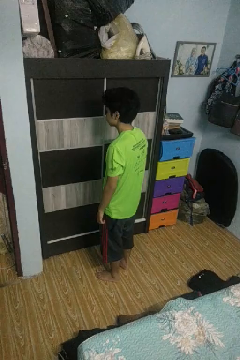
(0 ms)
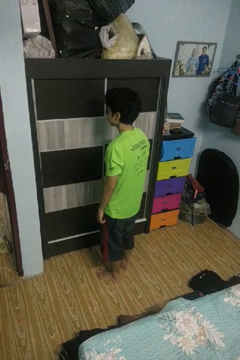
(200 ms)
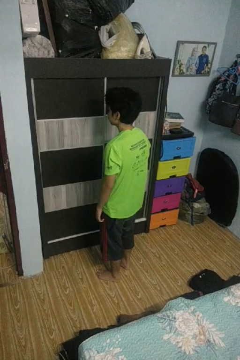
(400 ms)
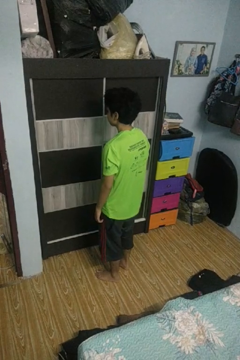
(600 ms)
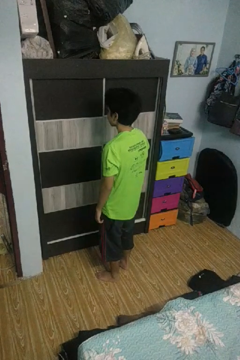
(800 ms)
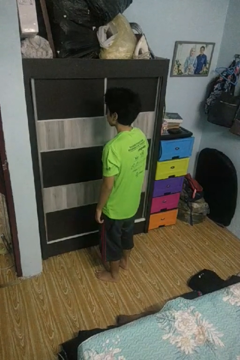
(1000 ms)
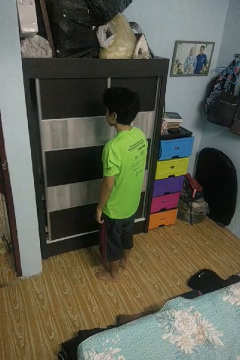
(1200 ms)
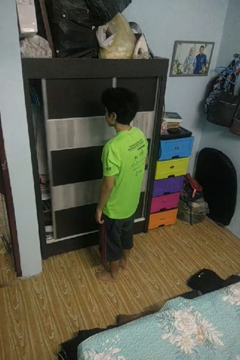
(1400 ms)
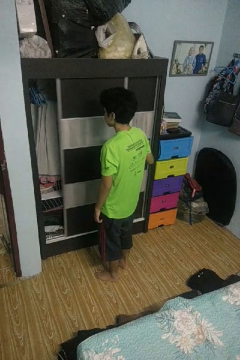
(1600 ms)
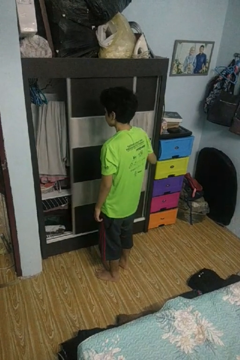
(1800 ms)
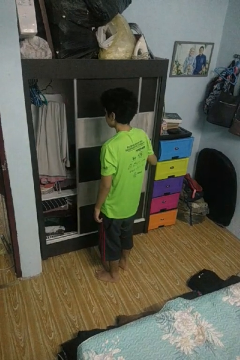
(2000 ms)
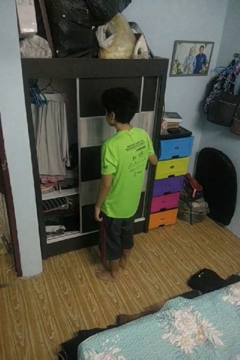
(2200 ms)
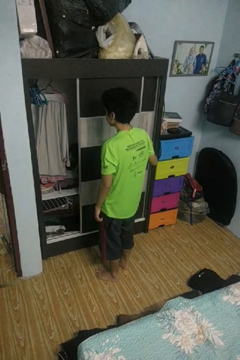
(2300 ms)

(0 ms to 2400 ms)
person opens closet door

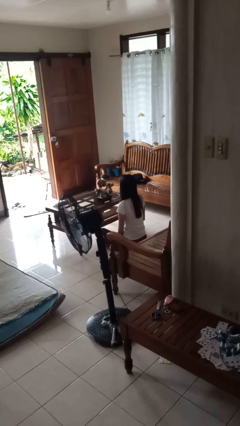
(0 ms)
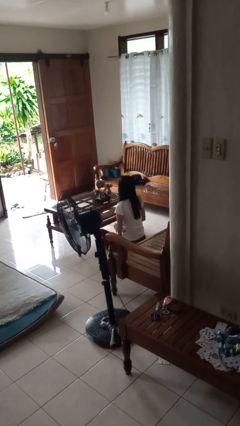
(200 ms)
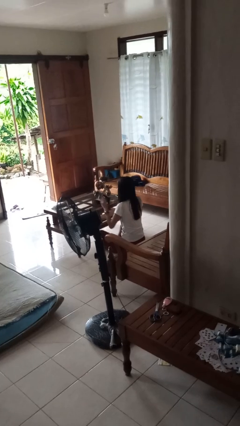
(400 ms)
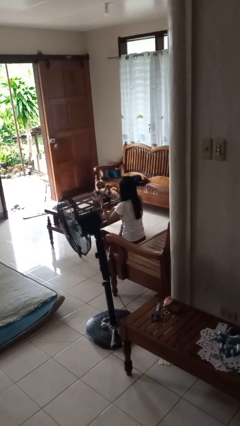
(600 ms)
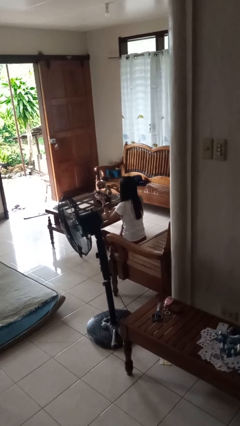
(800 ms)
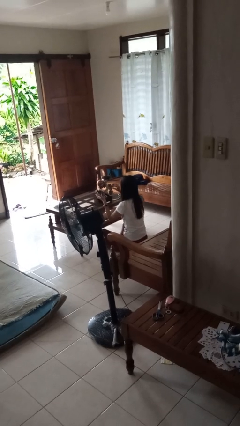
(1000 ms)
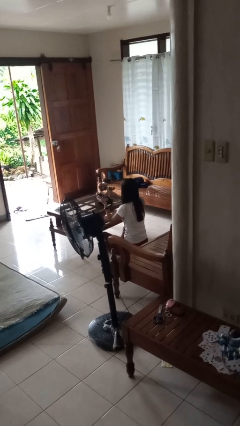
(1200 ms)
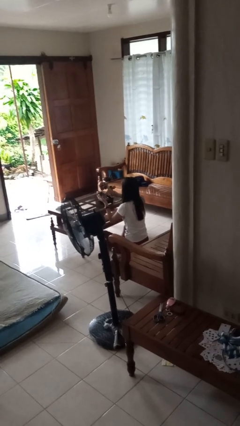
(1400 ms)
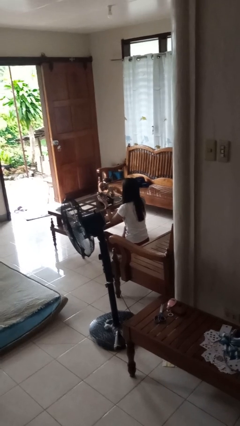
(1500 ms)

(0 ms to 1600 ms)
person arranges flowers in vase

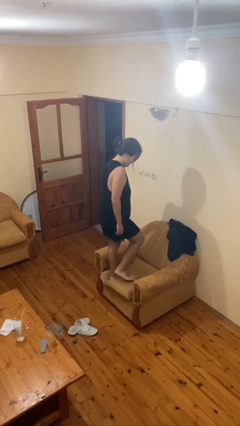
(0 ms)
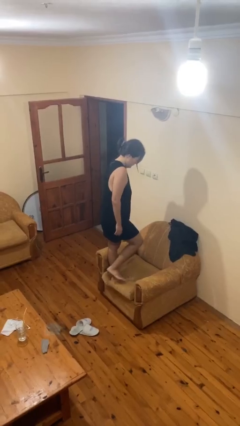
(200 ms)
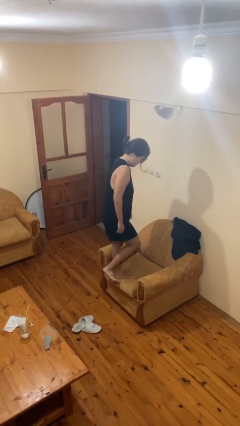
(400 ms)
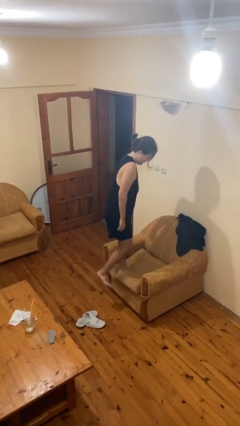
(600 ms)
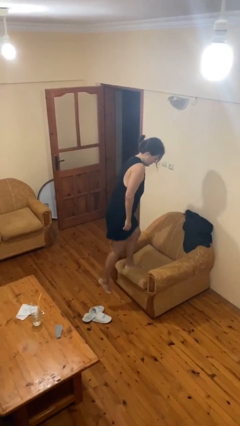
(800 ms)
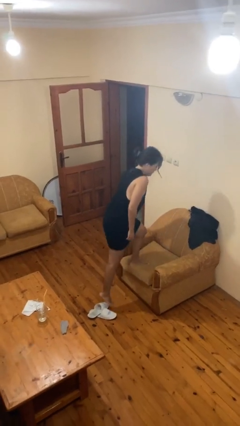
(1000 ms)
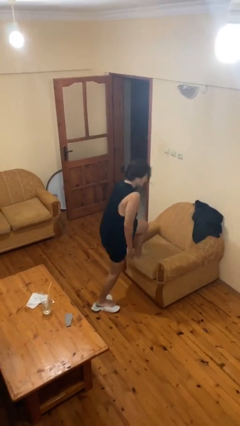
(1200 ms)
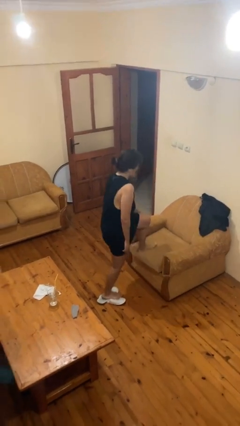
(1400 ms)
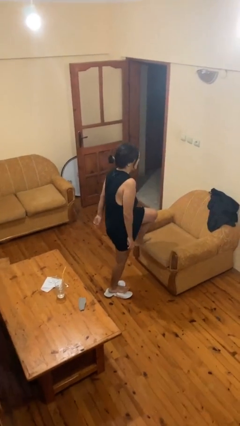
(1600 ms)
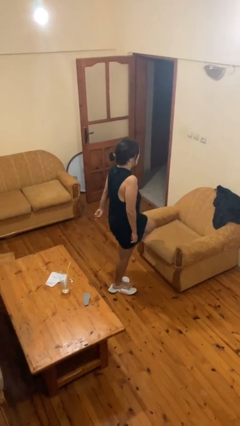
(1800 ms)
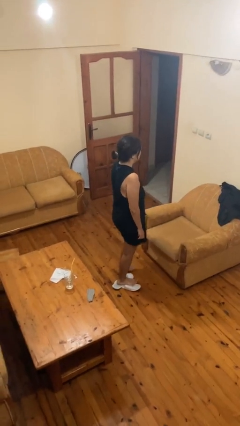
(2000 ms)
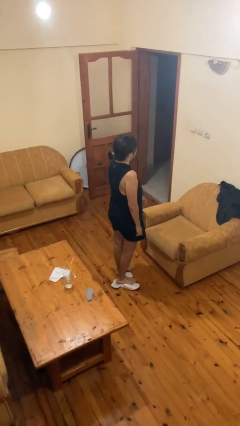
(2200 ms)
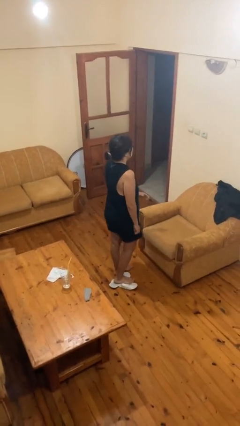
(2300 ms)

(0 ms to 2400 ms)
person climbs off chair

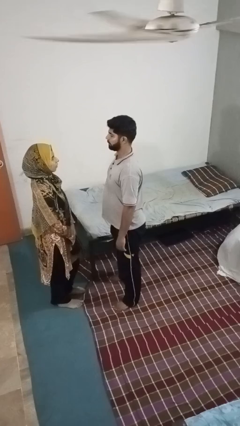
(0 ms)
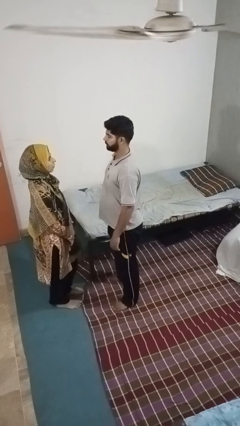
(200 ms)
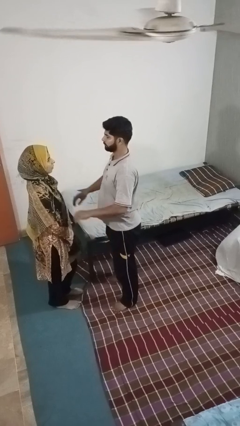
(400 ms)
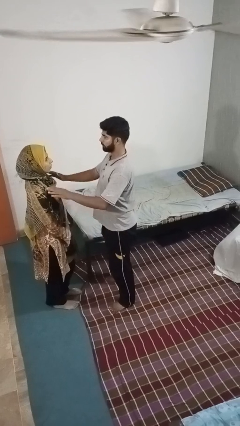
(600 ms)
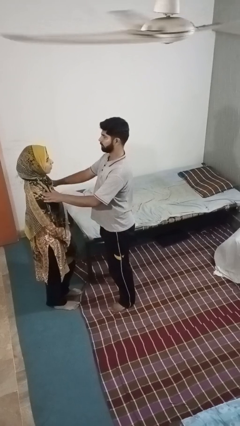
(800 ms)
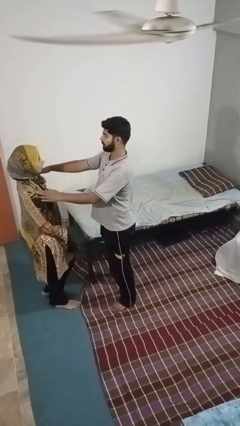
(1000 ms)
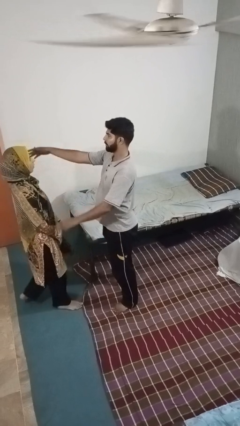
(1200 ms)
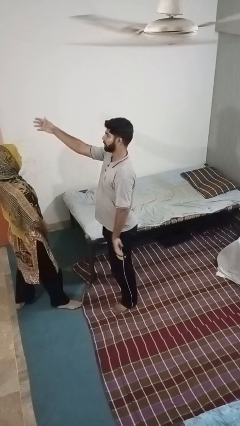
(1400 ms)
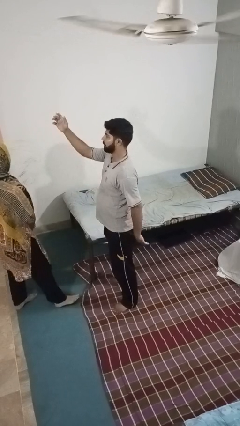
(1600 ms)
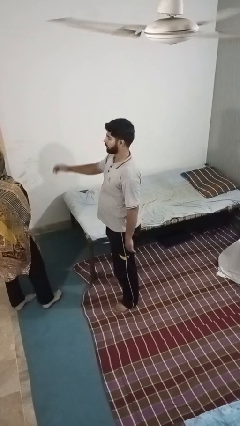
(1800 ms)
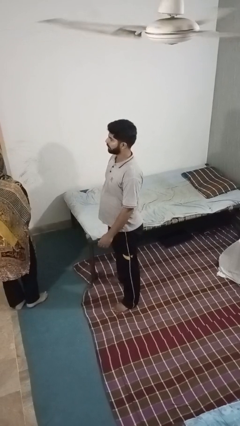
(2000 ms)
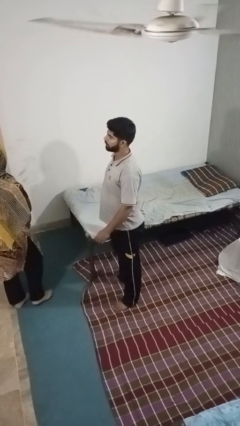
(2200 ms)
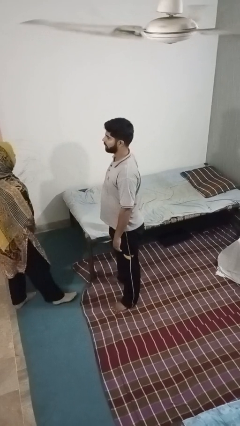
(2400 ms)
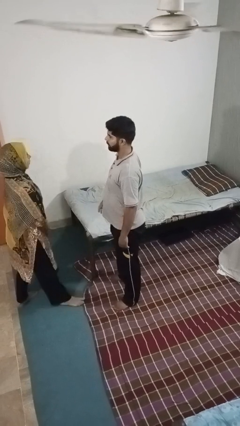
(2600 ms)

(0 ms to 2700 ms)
person shoves person

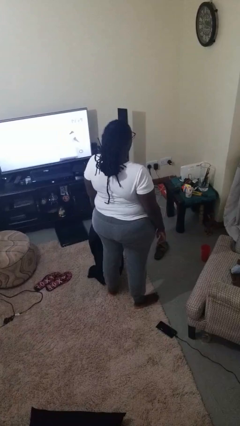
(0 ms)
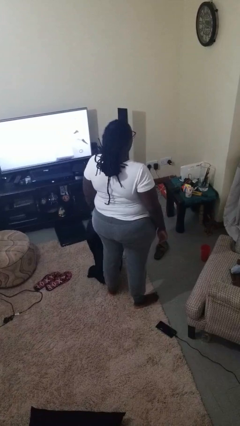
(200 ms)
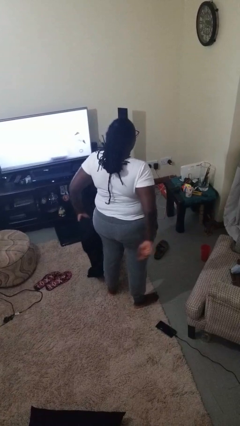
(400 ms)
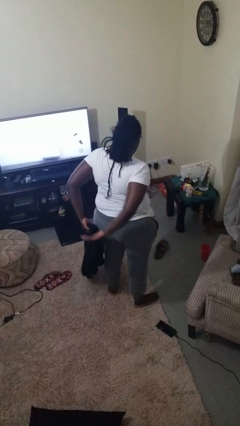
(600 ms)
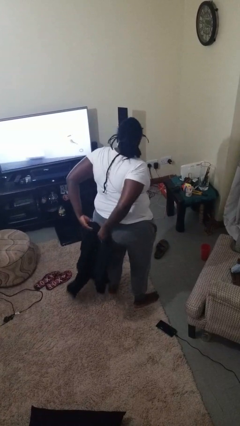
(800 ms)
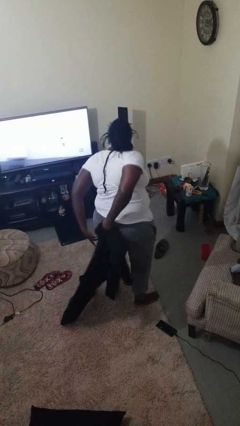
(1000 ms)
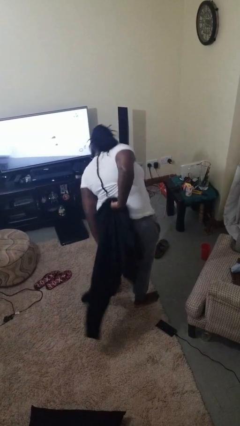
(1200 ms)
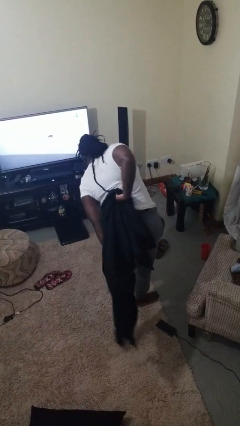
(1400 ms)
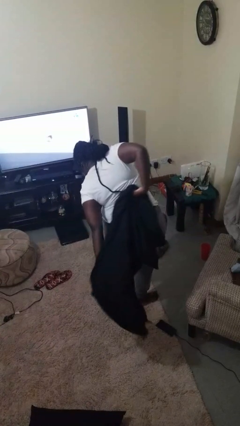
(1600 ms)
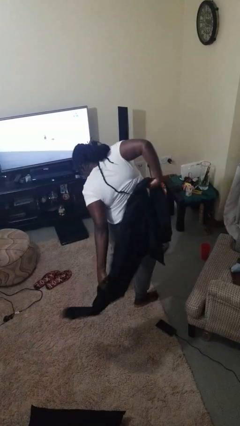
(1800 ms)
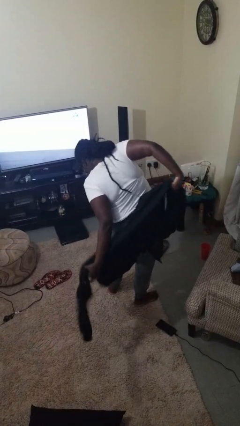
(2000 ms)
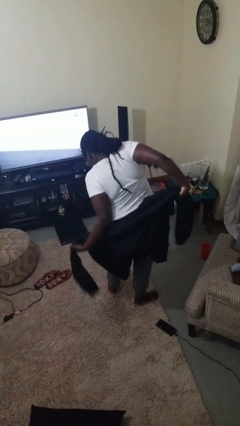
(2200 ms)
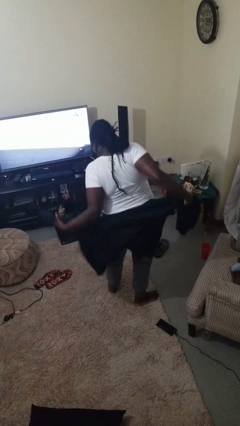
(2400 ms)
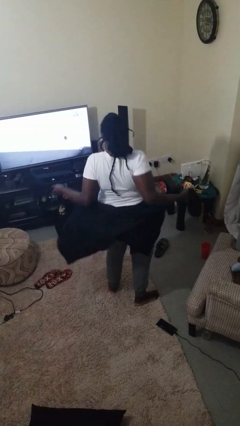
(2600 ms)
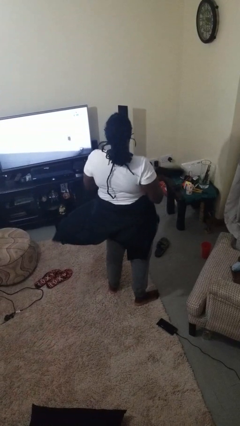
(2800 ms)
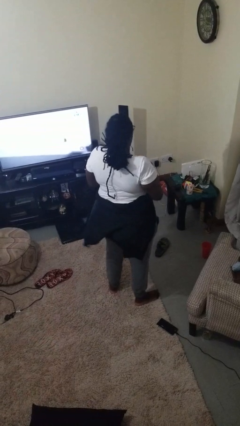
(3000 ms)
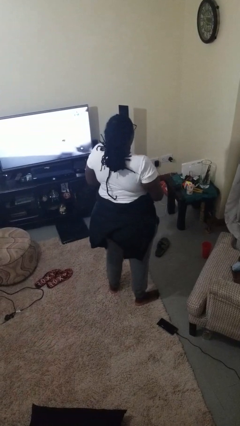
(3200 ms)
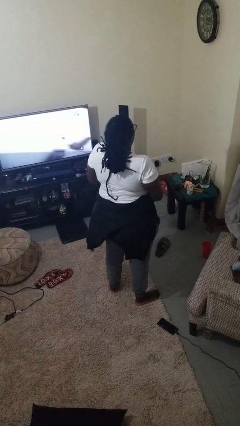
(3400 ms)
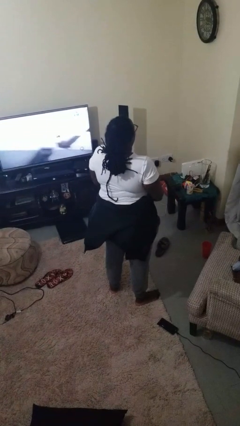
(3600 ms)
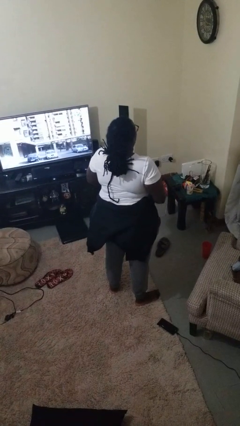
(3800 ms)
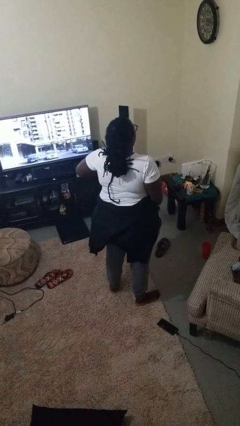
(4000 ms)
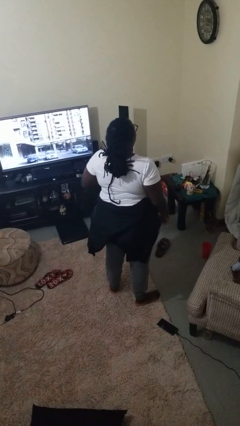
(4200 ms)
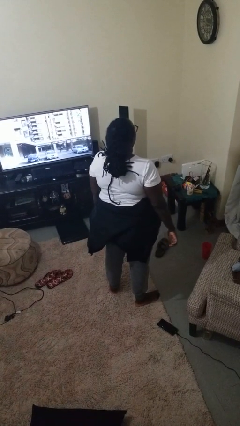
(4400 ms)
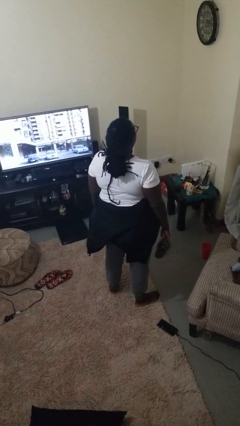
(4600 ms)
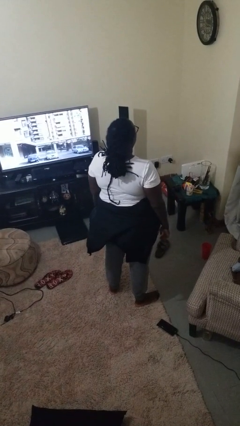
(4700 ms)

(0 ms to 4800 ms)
person ties jacket around waist

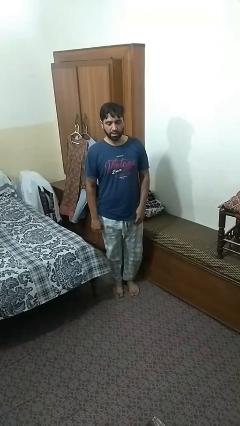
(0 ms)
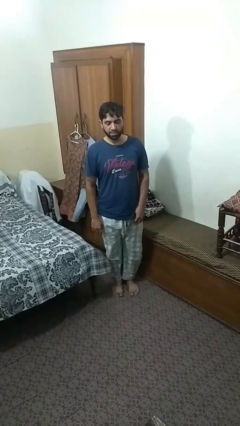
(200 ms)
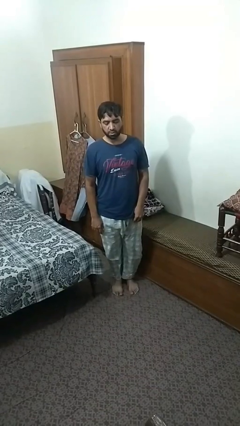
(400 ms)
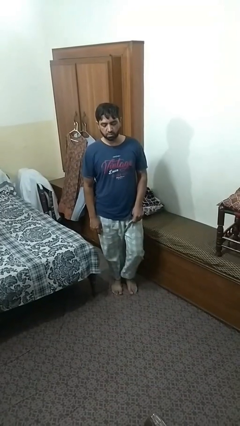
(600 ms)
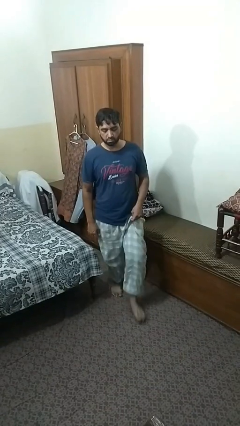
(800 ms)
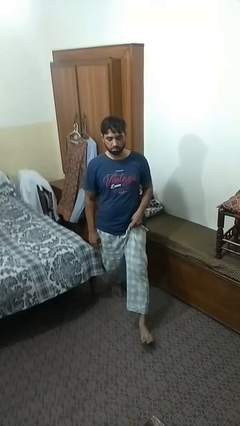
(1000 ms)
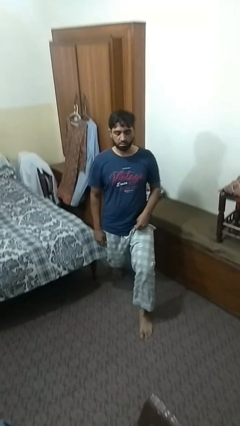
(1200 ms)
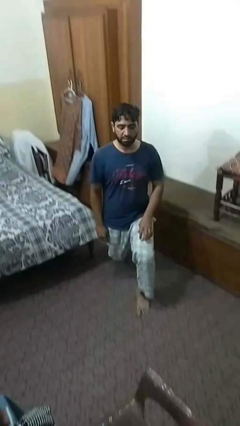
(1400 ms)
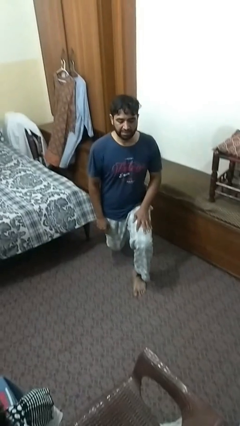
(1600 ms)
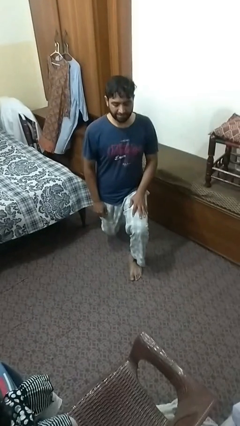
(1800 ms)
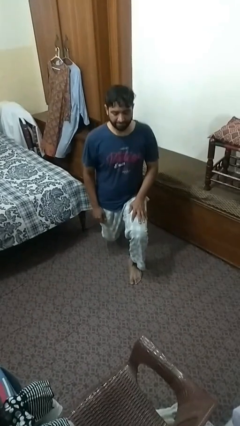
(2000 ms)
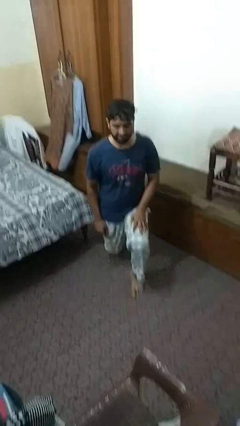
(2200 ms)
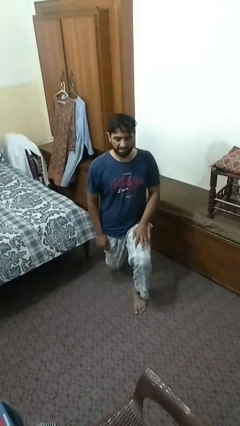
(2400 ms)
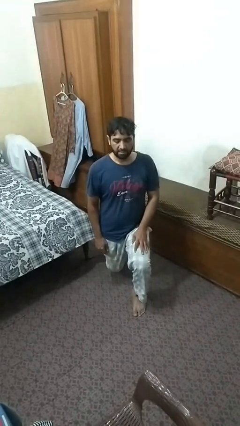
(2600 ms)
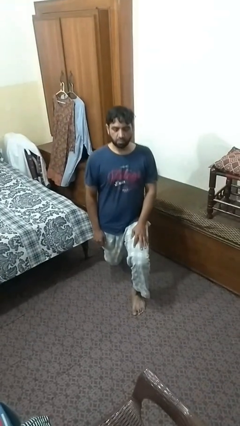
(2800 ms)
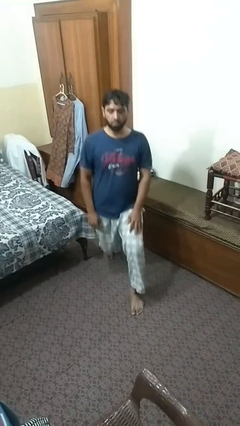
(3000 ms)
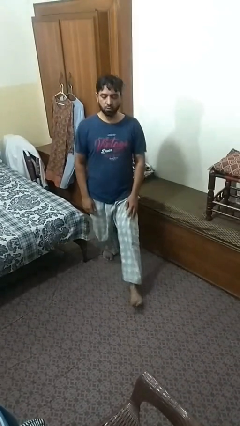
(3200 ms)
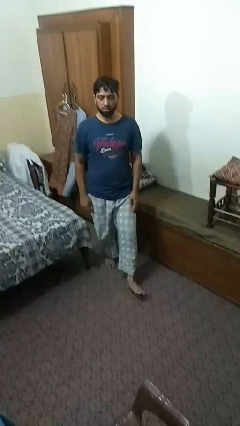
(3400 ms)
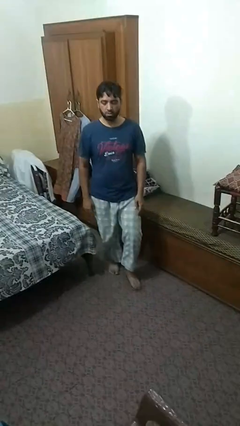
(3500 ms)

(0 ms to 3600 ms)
person exercises with lunges

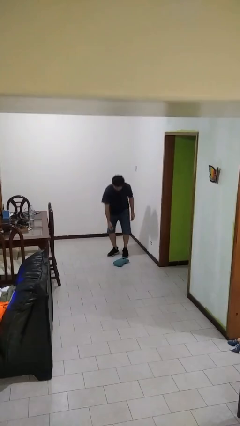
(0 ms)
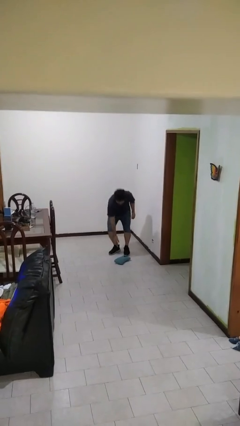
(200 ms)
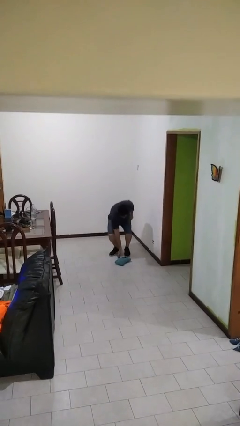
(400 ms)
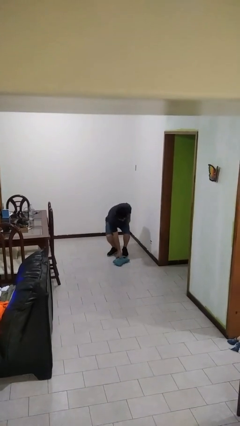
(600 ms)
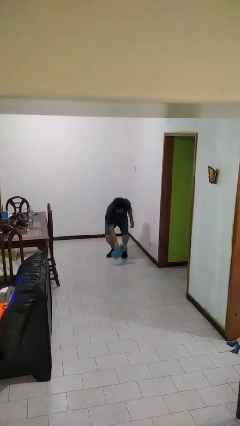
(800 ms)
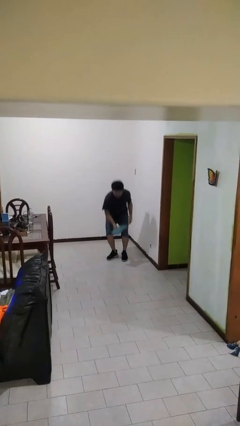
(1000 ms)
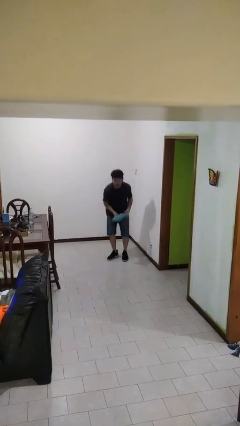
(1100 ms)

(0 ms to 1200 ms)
person picks up object from floor
